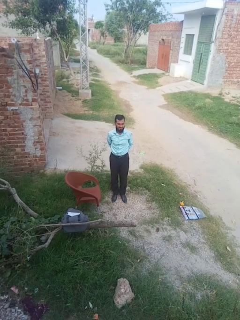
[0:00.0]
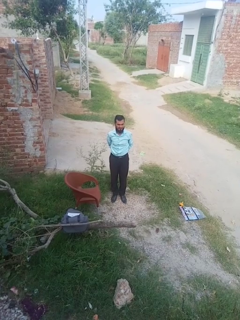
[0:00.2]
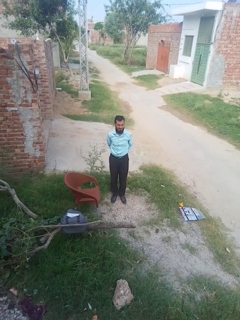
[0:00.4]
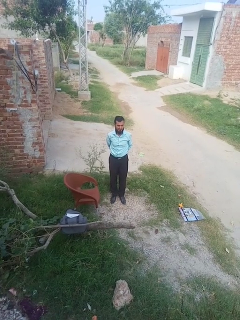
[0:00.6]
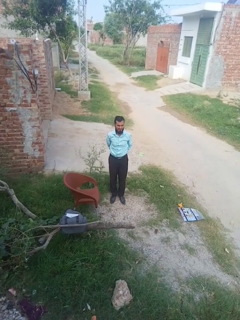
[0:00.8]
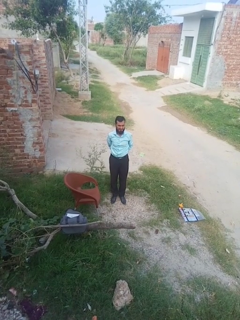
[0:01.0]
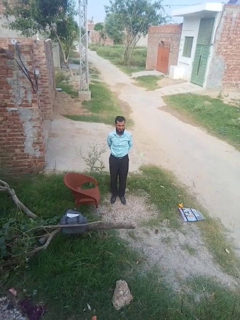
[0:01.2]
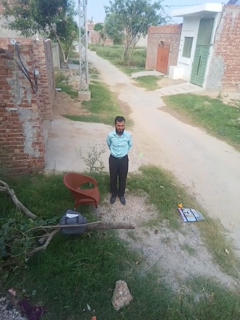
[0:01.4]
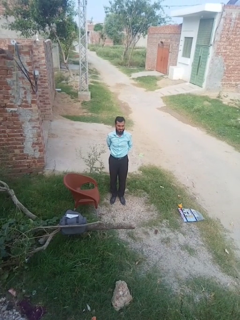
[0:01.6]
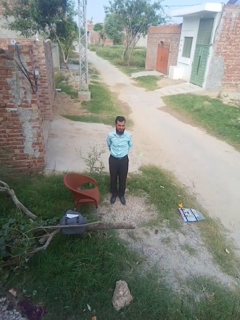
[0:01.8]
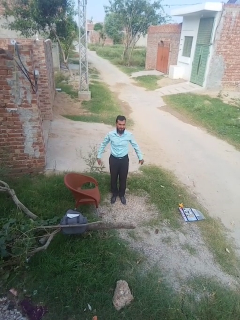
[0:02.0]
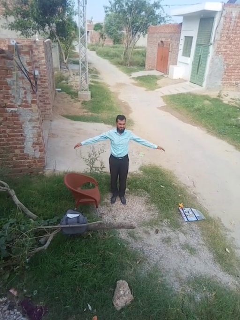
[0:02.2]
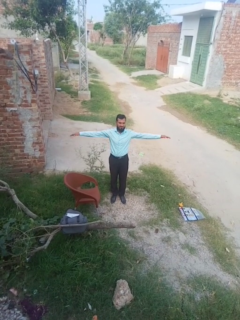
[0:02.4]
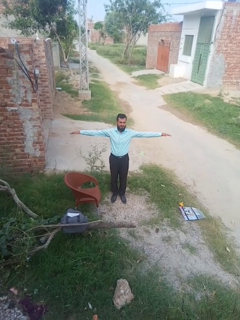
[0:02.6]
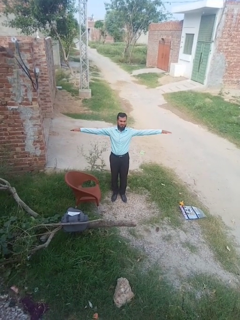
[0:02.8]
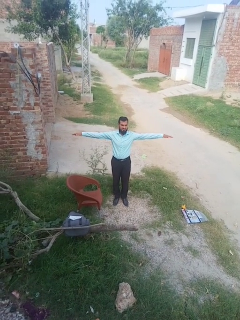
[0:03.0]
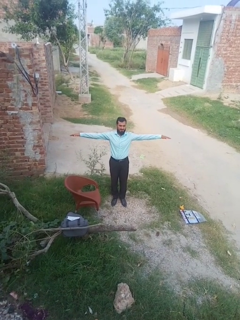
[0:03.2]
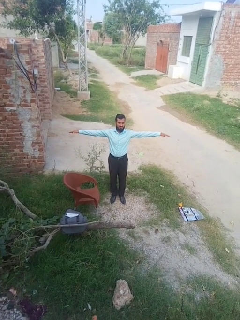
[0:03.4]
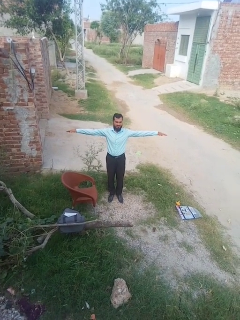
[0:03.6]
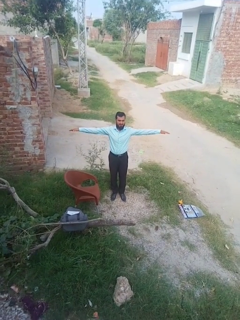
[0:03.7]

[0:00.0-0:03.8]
person stretches arms to side

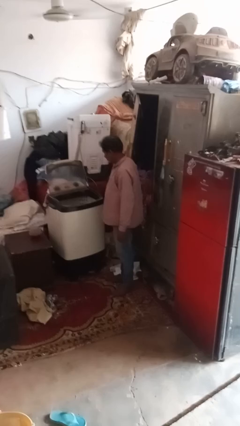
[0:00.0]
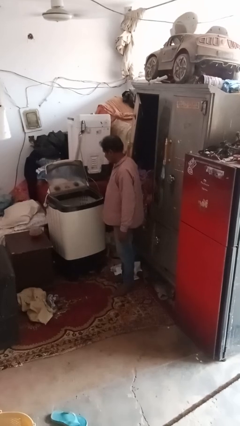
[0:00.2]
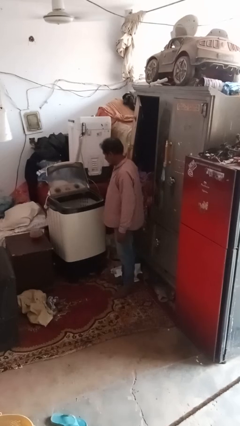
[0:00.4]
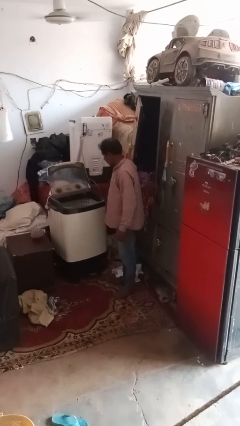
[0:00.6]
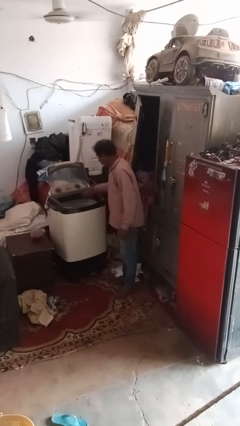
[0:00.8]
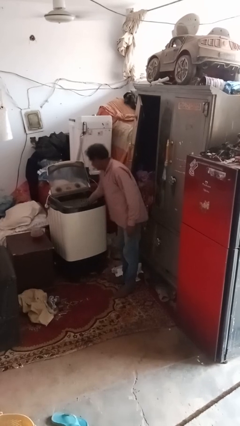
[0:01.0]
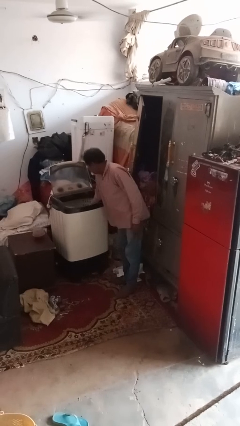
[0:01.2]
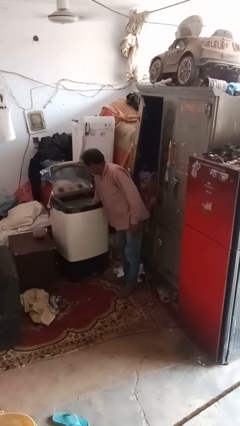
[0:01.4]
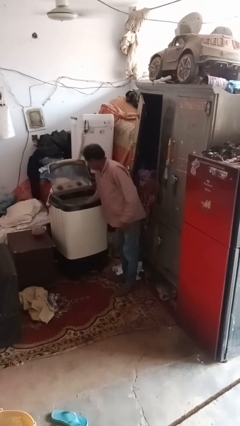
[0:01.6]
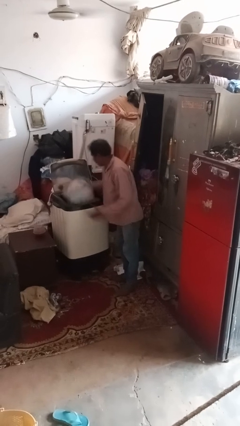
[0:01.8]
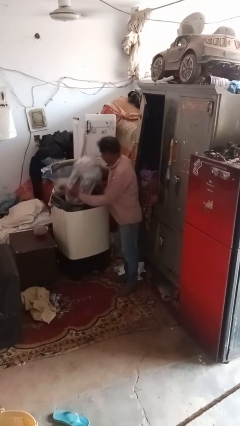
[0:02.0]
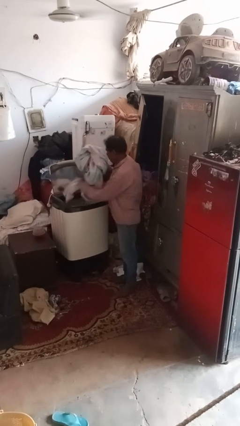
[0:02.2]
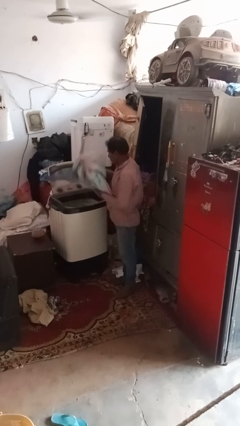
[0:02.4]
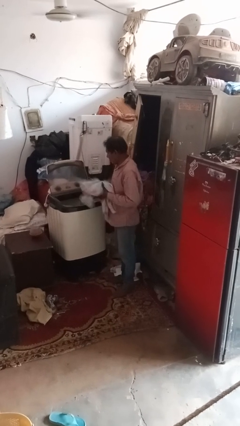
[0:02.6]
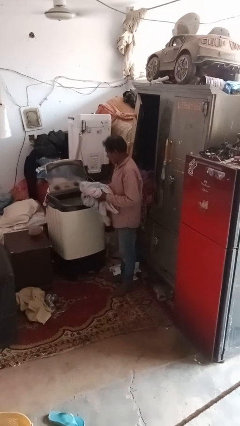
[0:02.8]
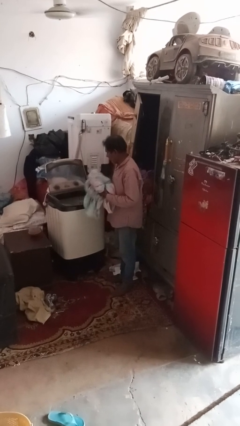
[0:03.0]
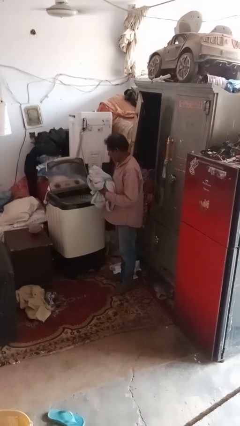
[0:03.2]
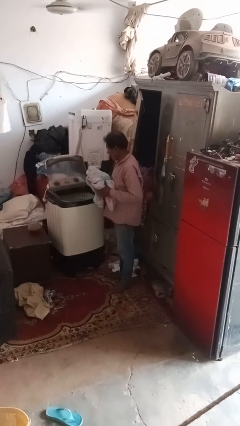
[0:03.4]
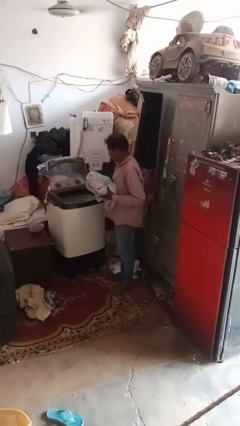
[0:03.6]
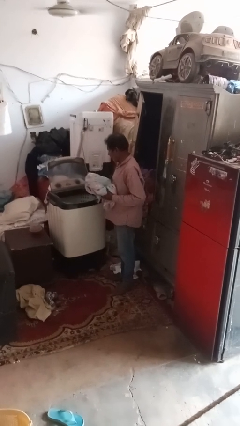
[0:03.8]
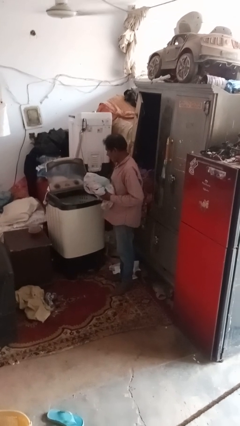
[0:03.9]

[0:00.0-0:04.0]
person unloads clotheswasher

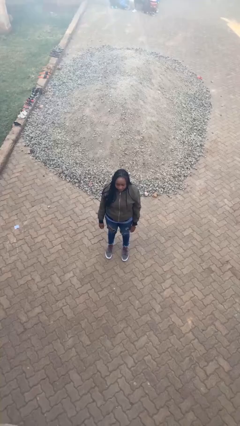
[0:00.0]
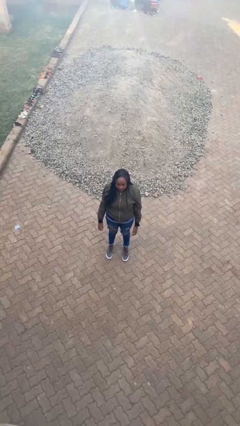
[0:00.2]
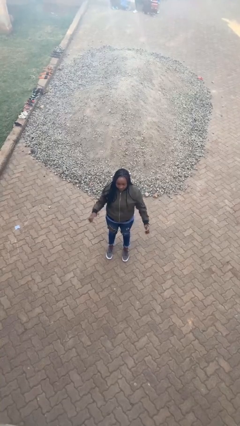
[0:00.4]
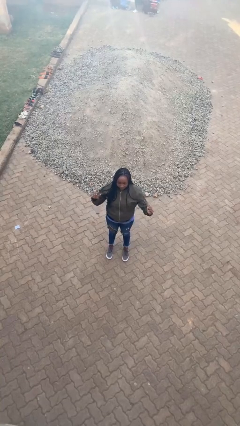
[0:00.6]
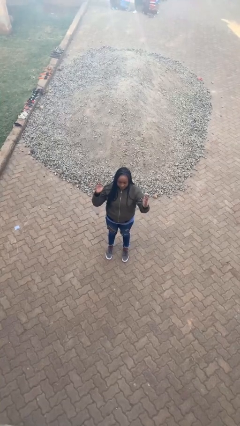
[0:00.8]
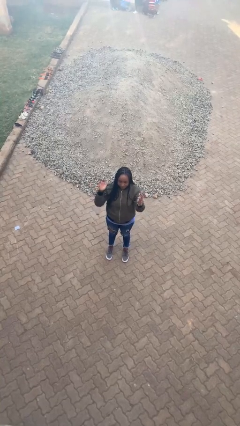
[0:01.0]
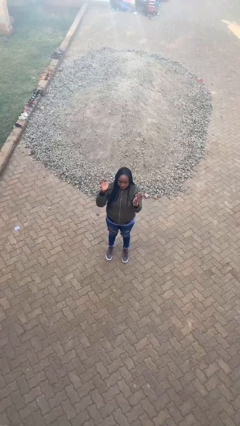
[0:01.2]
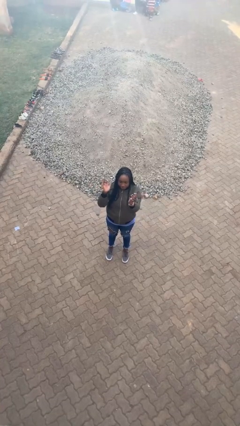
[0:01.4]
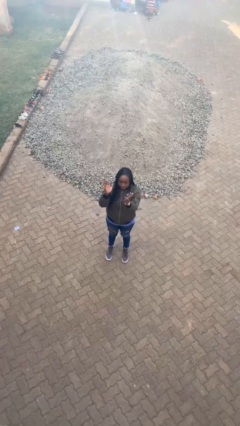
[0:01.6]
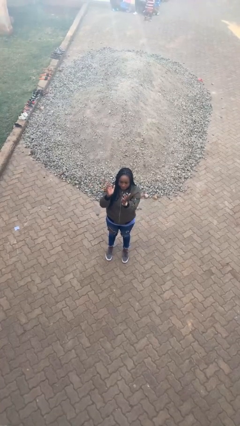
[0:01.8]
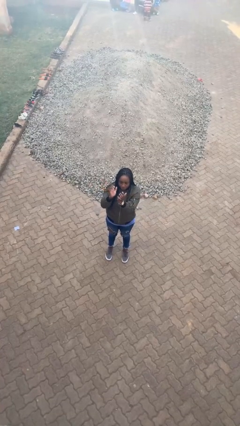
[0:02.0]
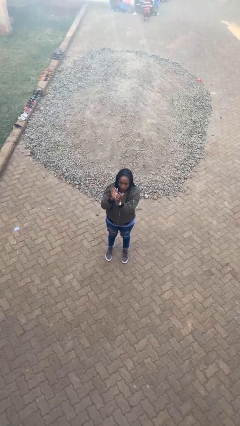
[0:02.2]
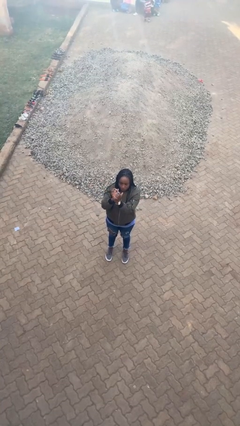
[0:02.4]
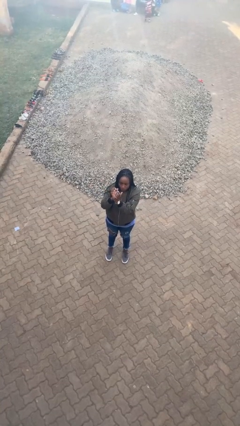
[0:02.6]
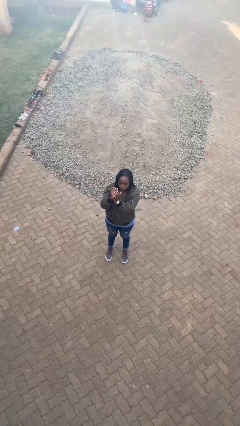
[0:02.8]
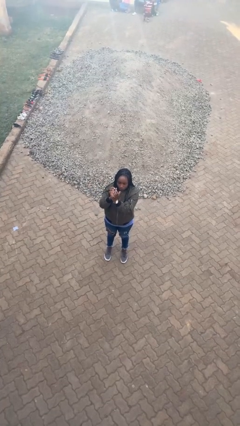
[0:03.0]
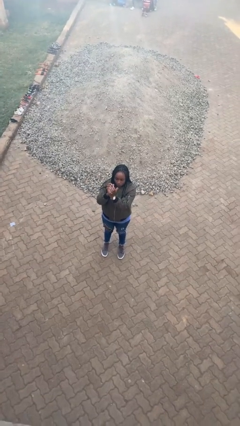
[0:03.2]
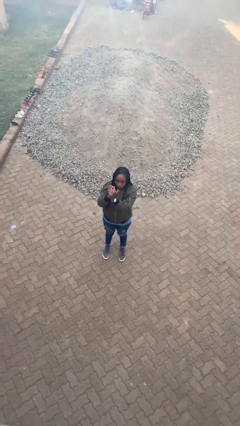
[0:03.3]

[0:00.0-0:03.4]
person gestures zoom in

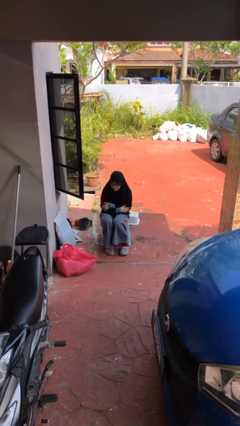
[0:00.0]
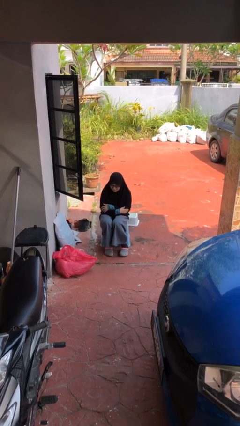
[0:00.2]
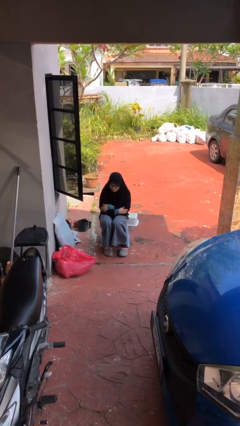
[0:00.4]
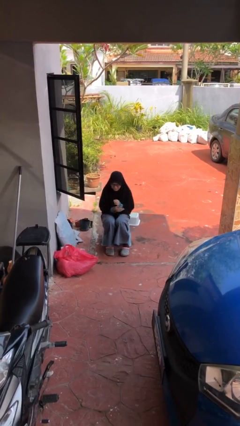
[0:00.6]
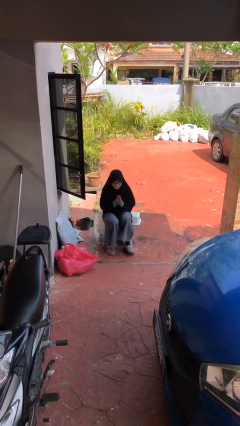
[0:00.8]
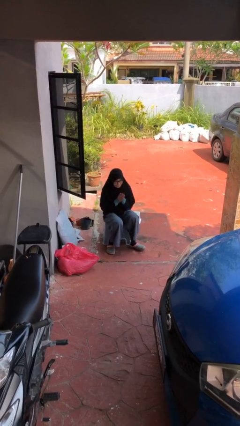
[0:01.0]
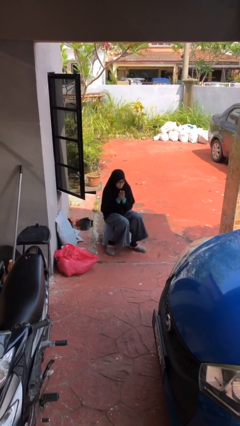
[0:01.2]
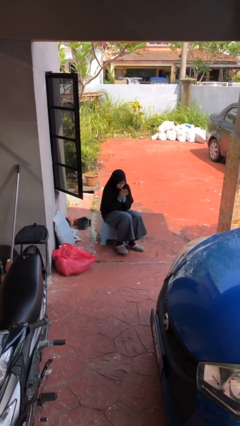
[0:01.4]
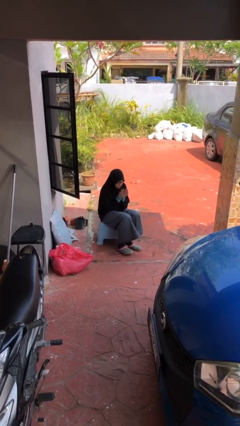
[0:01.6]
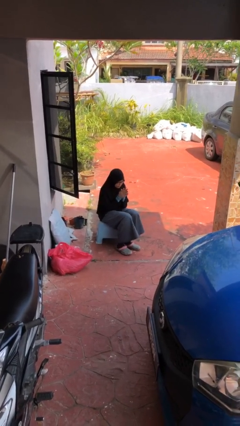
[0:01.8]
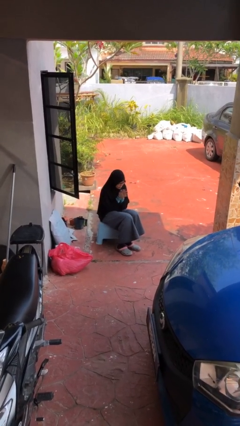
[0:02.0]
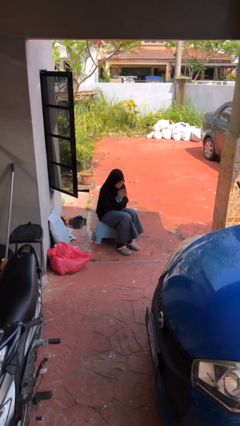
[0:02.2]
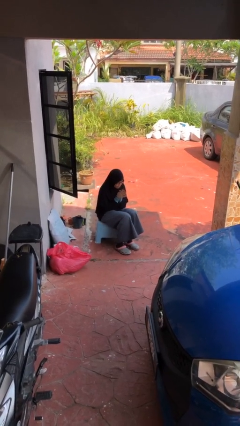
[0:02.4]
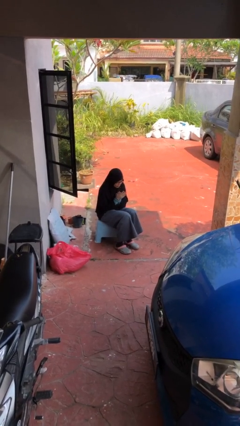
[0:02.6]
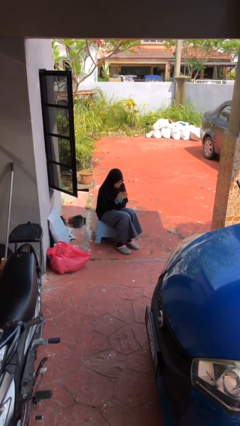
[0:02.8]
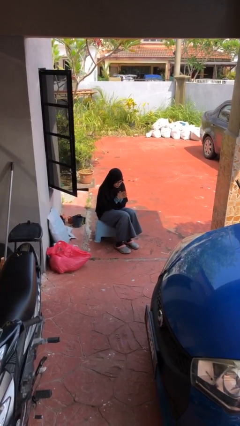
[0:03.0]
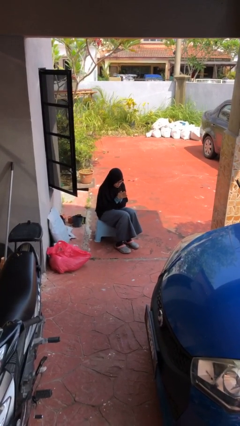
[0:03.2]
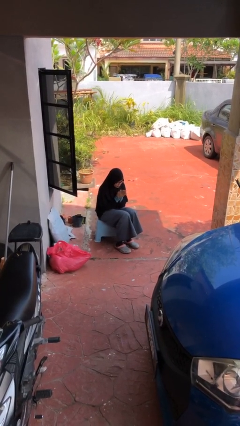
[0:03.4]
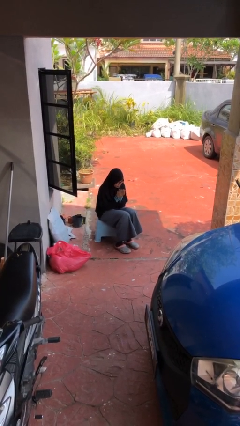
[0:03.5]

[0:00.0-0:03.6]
person blows into hands

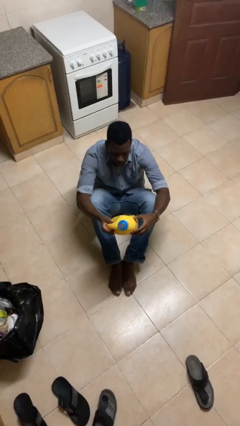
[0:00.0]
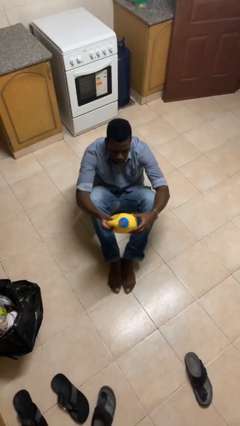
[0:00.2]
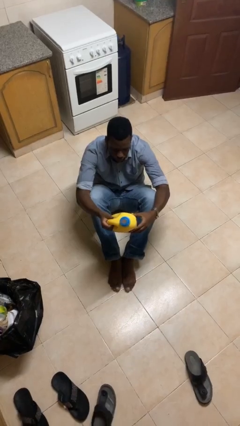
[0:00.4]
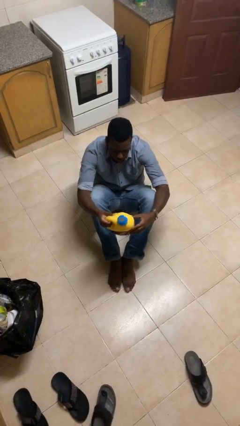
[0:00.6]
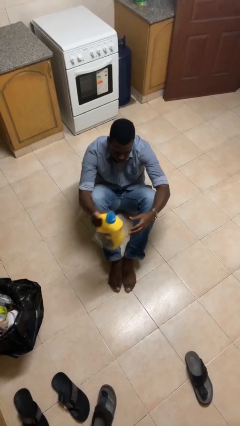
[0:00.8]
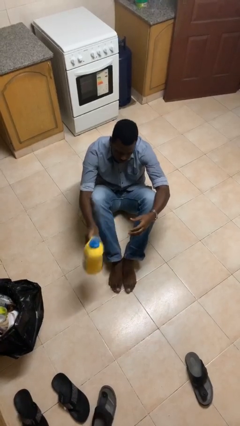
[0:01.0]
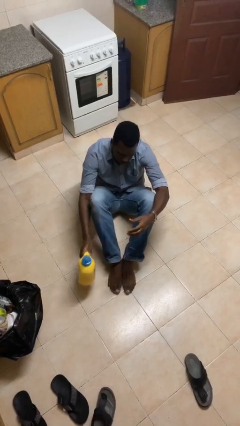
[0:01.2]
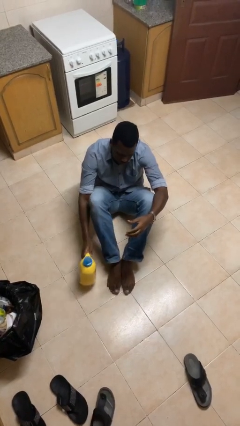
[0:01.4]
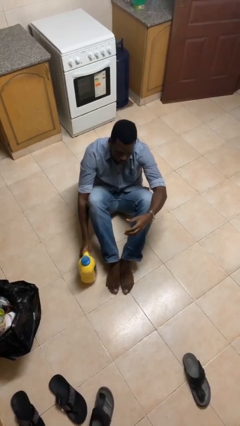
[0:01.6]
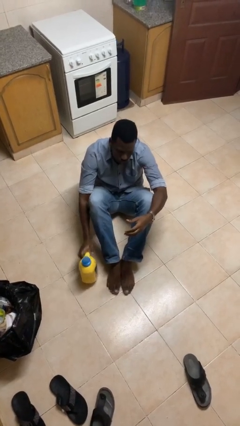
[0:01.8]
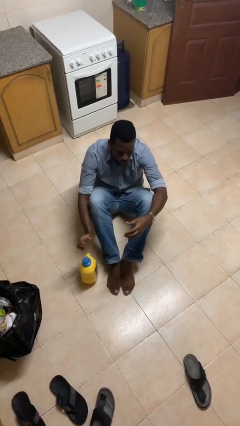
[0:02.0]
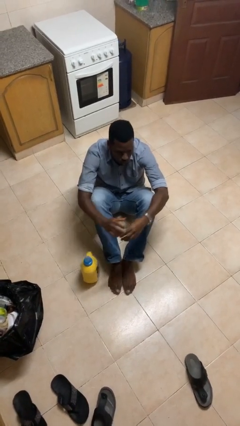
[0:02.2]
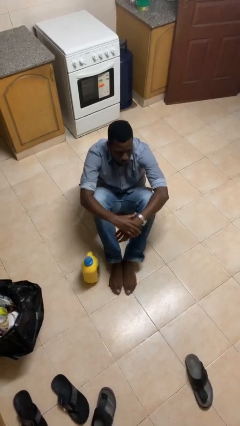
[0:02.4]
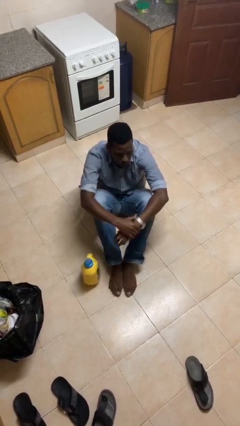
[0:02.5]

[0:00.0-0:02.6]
person puts down object on floor

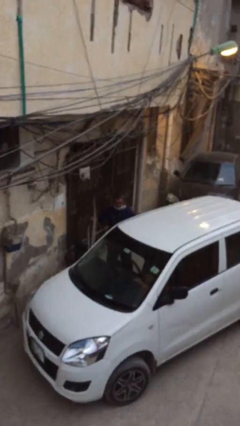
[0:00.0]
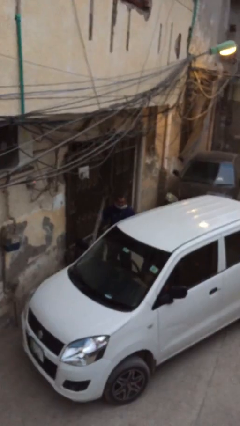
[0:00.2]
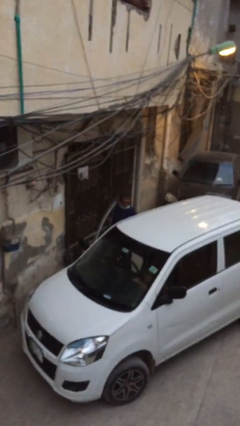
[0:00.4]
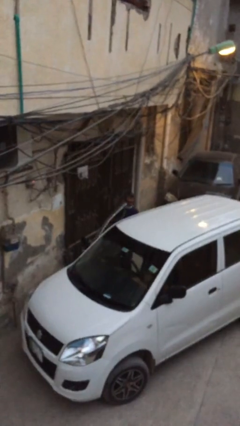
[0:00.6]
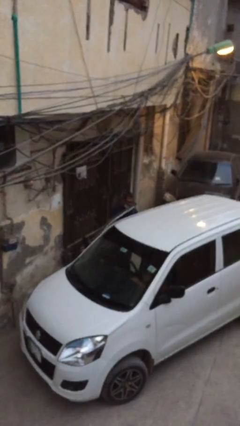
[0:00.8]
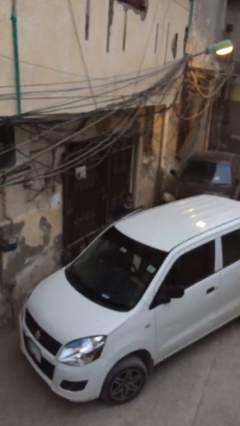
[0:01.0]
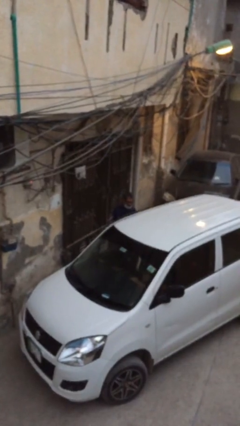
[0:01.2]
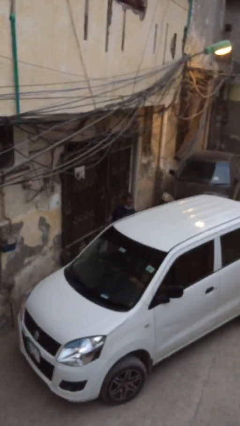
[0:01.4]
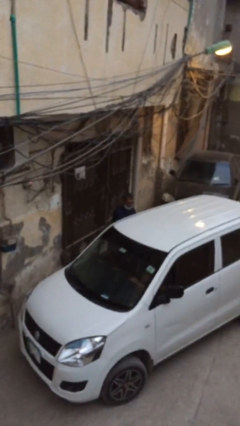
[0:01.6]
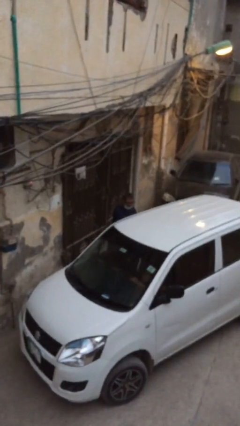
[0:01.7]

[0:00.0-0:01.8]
person closes car door
